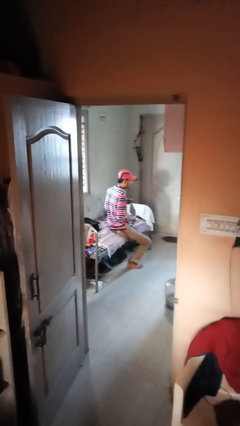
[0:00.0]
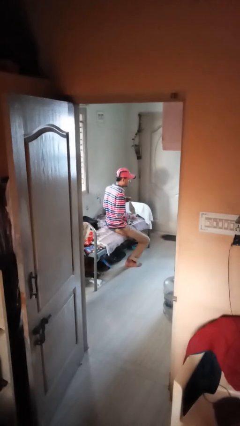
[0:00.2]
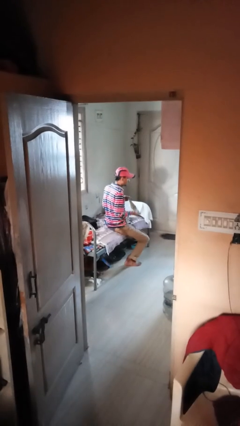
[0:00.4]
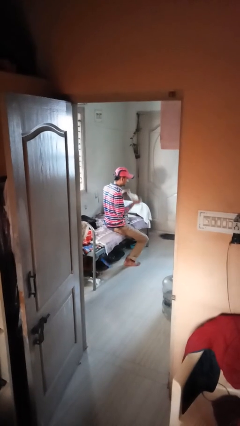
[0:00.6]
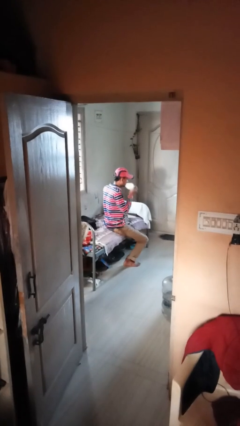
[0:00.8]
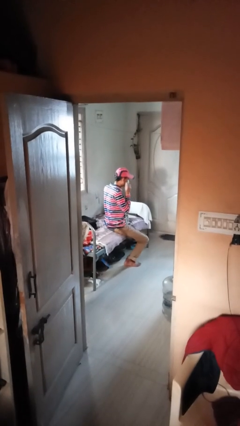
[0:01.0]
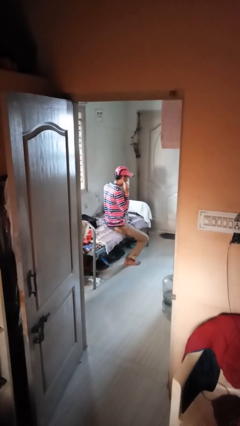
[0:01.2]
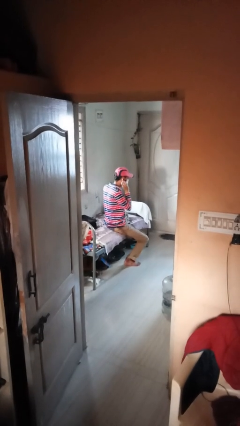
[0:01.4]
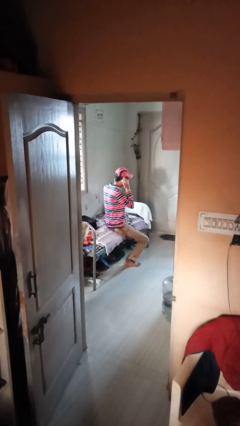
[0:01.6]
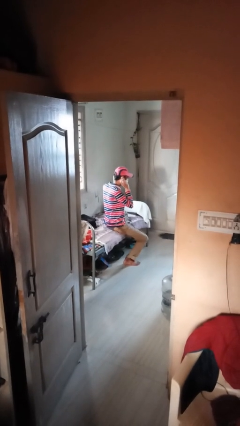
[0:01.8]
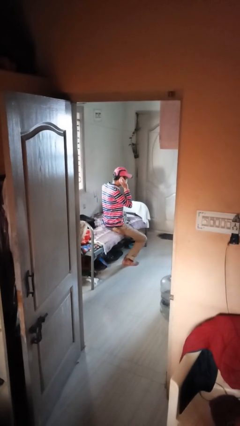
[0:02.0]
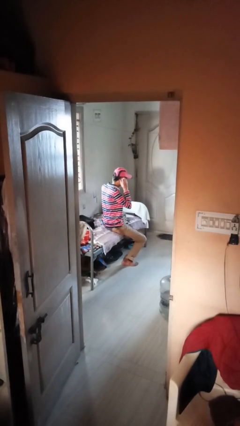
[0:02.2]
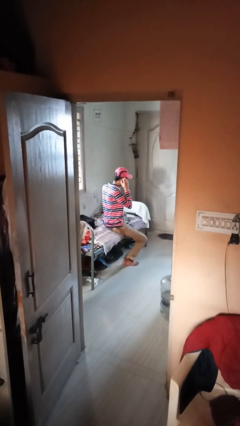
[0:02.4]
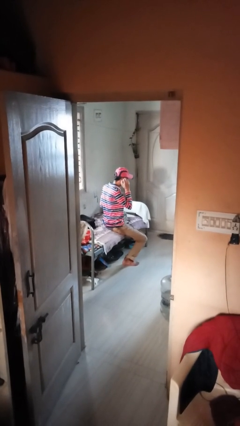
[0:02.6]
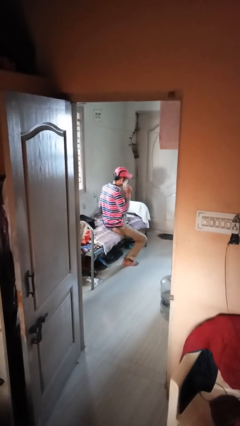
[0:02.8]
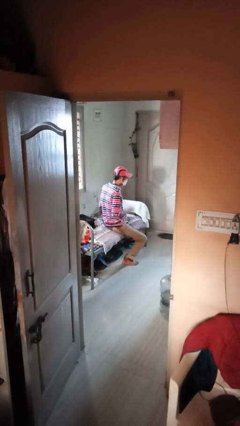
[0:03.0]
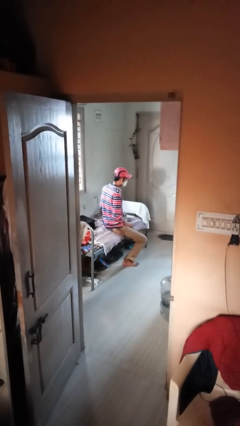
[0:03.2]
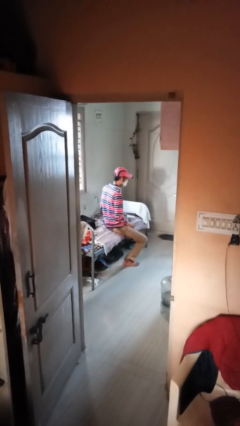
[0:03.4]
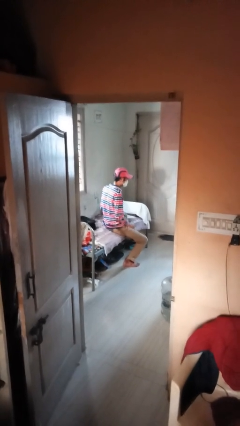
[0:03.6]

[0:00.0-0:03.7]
person puts on facemask

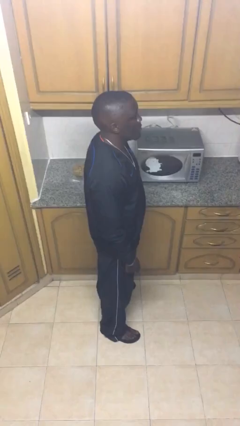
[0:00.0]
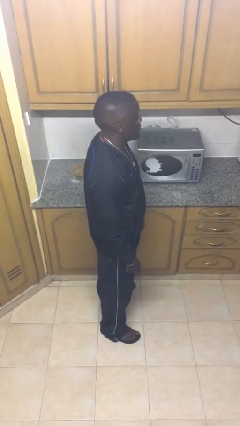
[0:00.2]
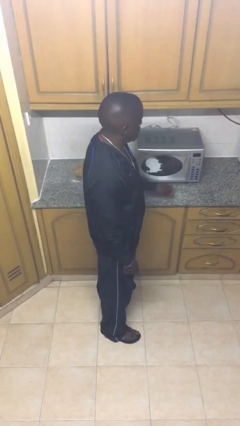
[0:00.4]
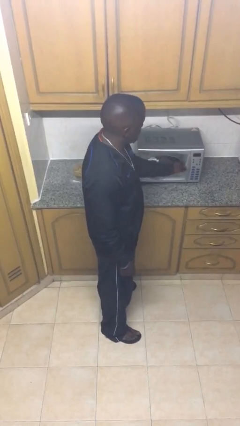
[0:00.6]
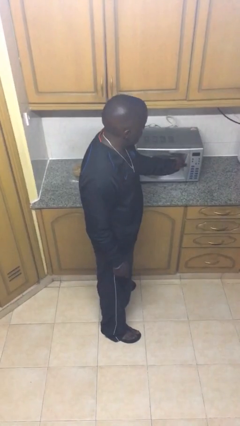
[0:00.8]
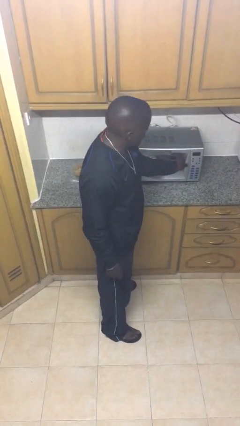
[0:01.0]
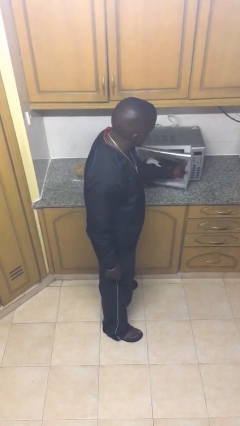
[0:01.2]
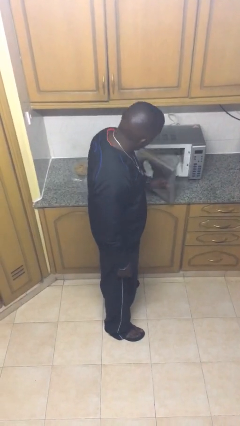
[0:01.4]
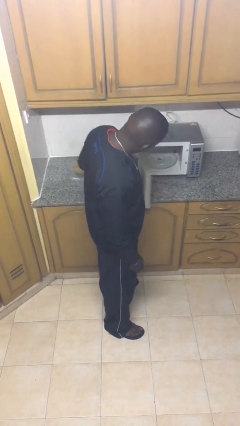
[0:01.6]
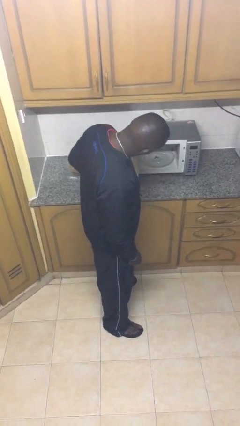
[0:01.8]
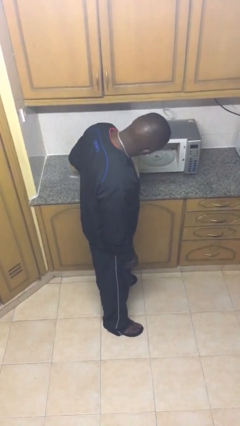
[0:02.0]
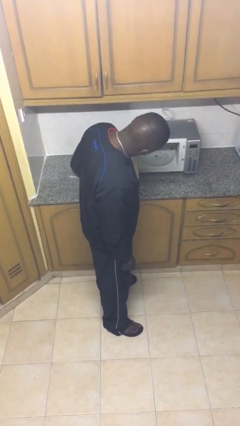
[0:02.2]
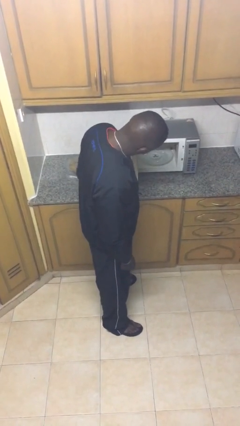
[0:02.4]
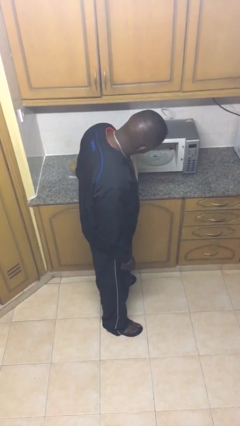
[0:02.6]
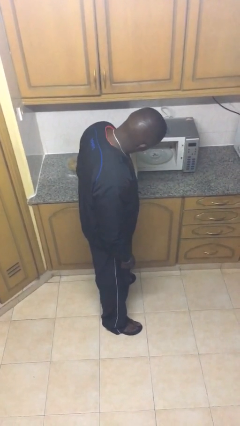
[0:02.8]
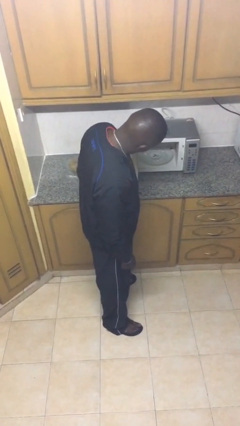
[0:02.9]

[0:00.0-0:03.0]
person opens microwave

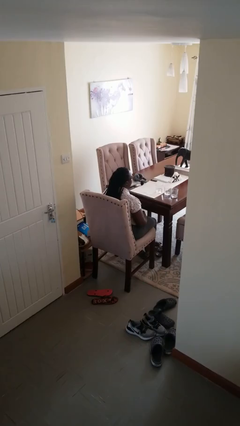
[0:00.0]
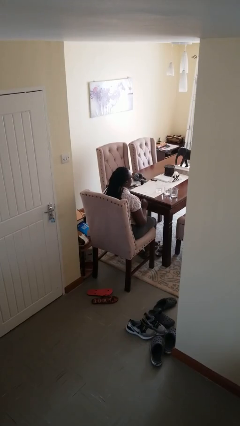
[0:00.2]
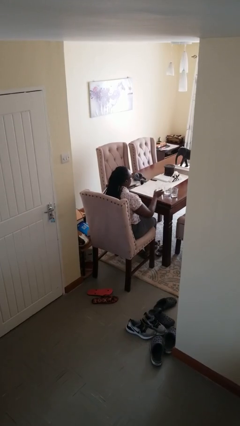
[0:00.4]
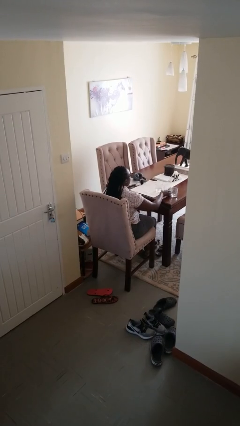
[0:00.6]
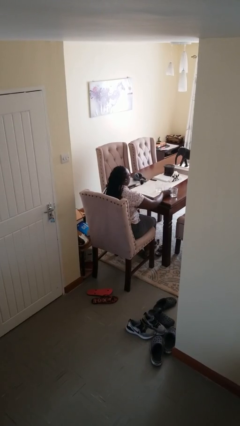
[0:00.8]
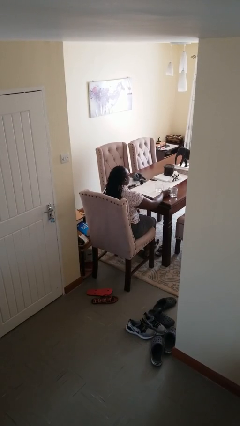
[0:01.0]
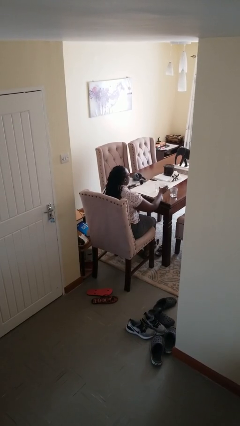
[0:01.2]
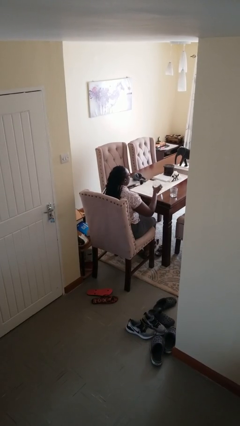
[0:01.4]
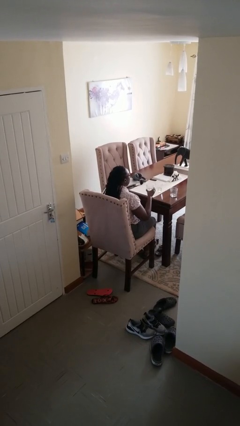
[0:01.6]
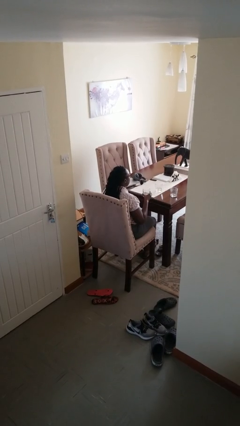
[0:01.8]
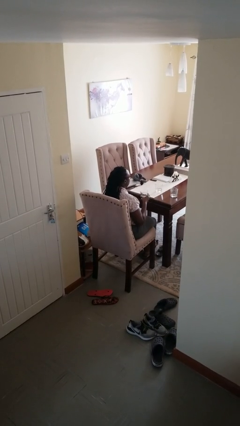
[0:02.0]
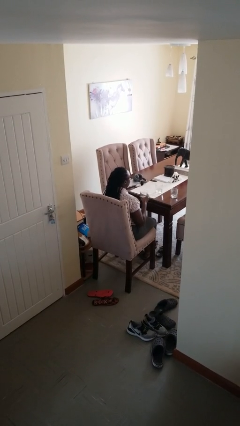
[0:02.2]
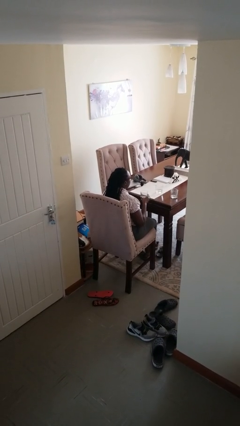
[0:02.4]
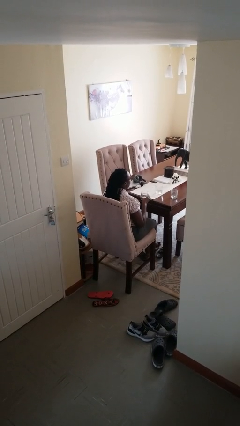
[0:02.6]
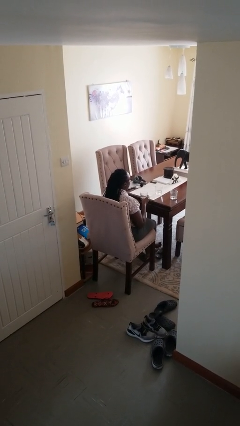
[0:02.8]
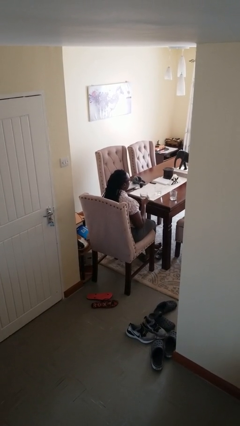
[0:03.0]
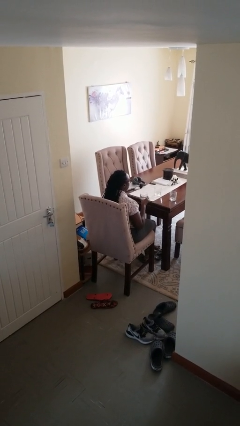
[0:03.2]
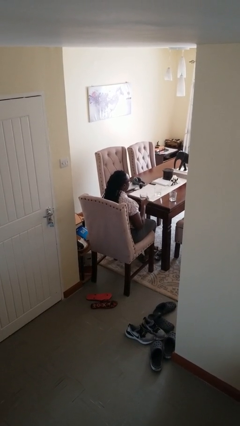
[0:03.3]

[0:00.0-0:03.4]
person picks up object from table

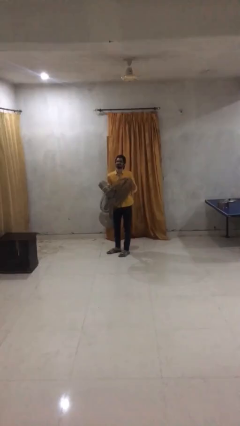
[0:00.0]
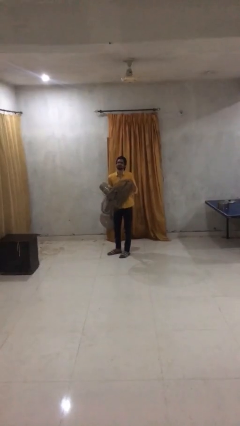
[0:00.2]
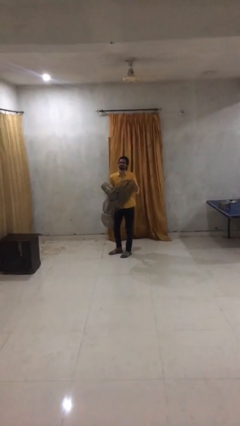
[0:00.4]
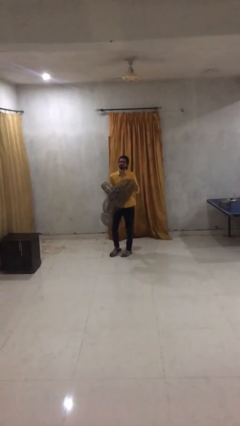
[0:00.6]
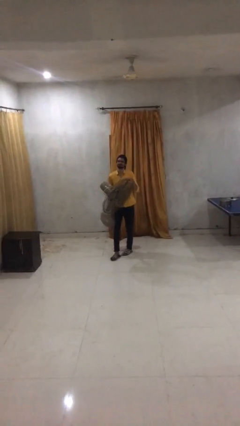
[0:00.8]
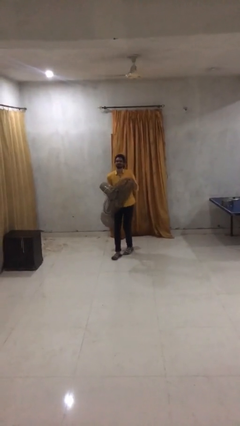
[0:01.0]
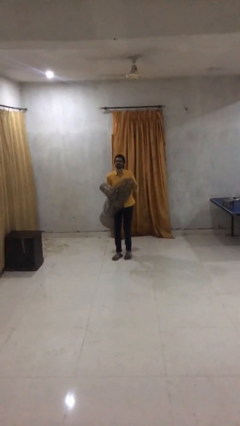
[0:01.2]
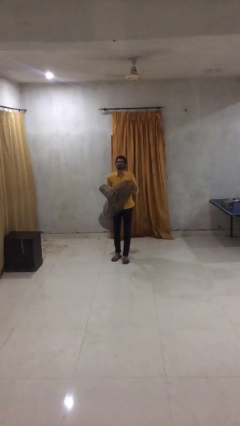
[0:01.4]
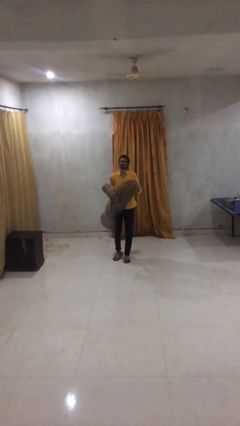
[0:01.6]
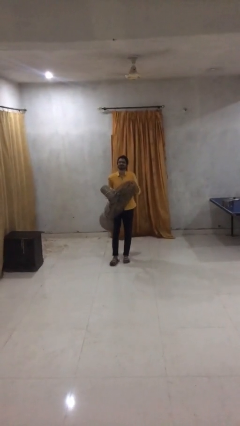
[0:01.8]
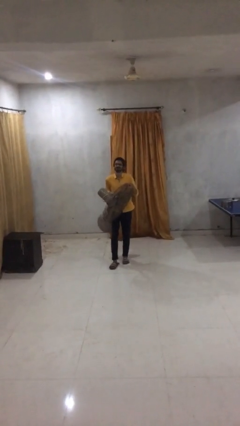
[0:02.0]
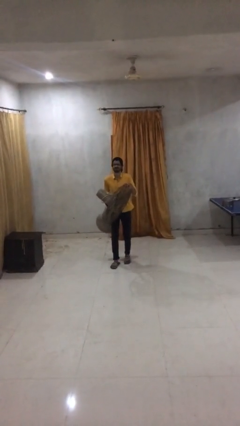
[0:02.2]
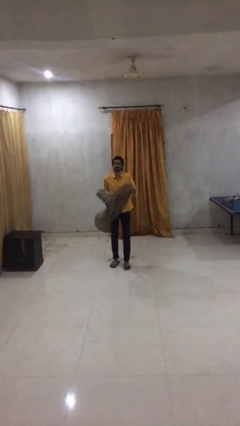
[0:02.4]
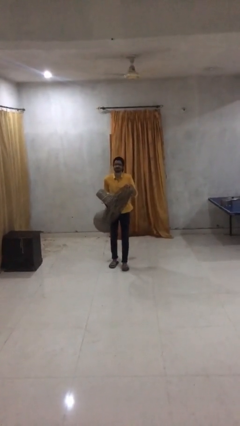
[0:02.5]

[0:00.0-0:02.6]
person carries heavy object

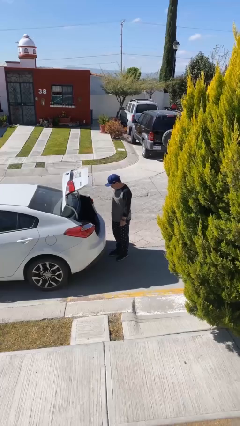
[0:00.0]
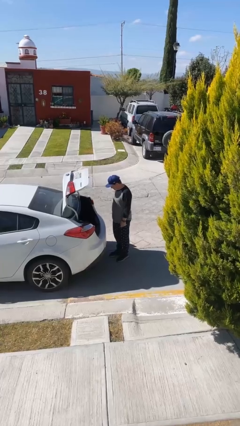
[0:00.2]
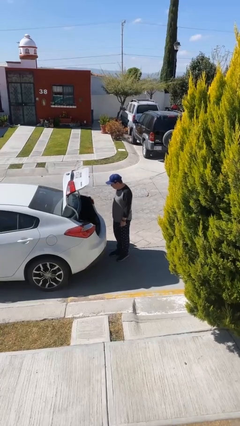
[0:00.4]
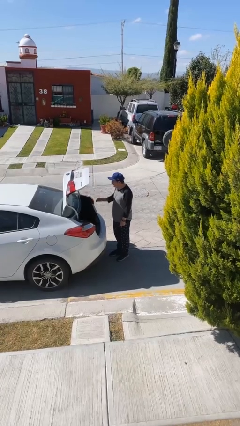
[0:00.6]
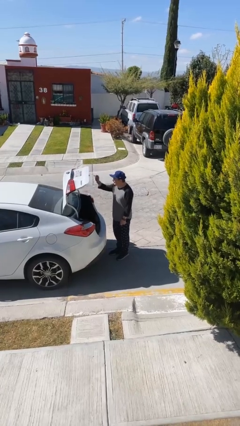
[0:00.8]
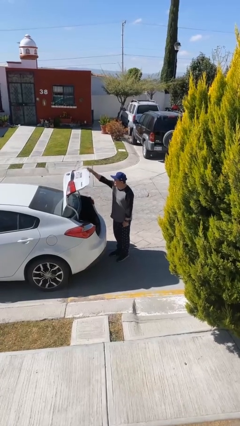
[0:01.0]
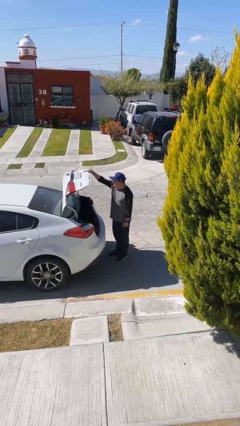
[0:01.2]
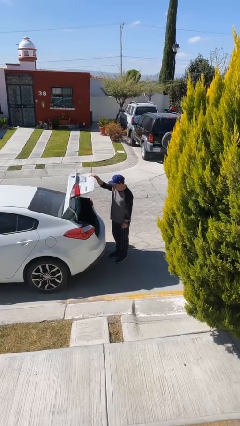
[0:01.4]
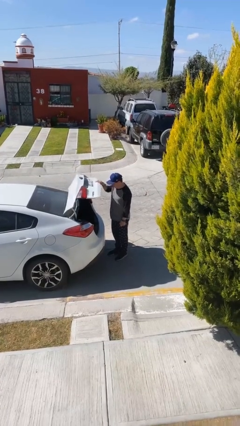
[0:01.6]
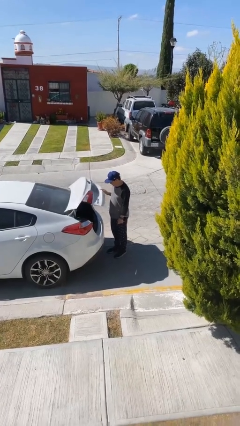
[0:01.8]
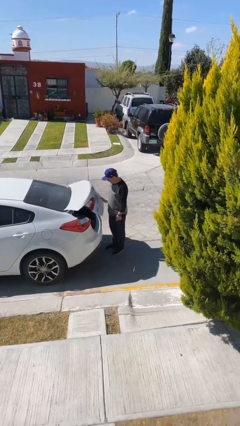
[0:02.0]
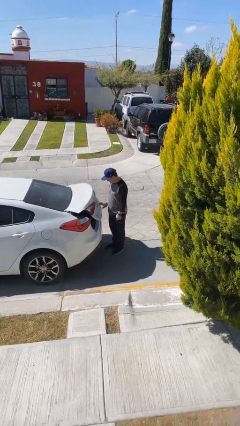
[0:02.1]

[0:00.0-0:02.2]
person closes car trunk

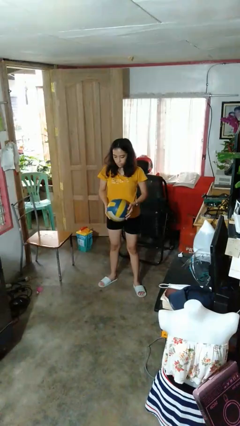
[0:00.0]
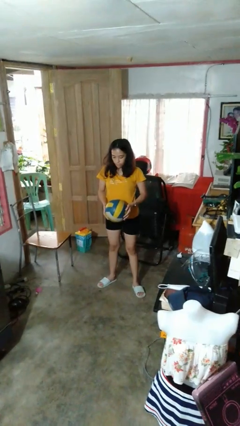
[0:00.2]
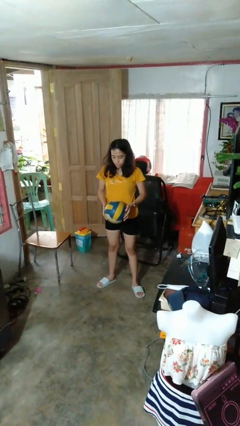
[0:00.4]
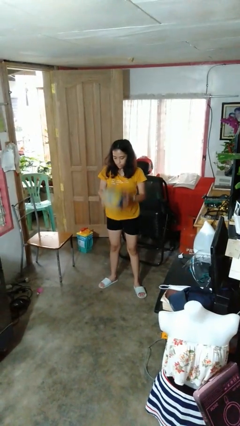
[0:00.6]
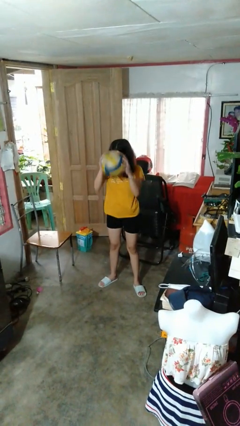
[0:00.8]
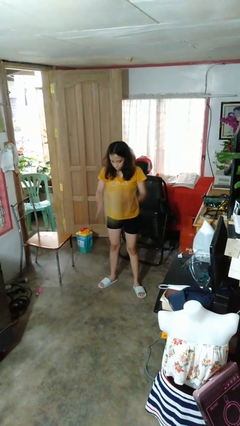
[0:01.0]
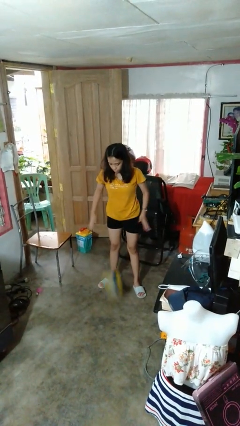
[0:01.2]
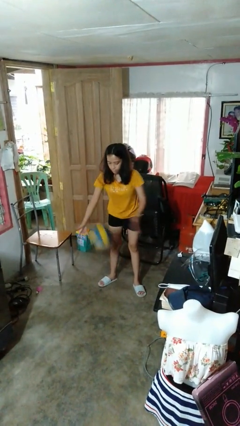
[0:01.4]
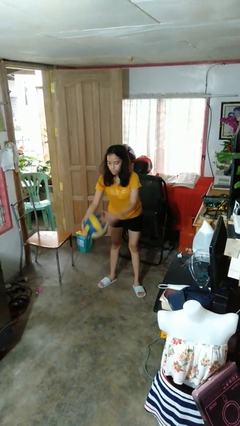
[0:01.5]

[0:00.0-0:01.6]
person bounces ball on floor

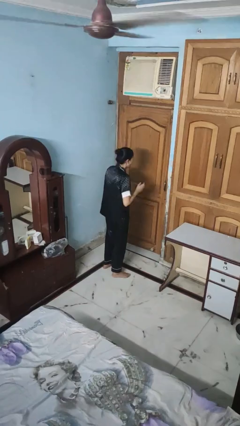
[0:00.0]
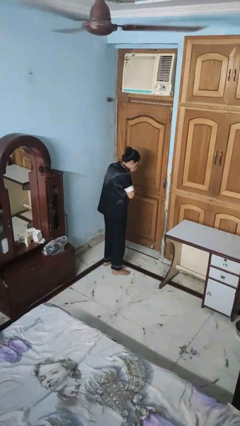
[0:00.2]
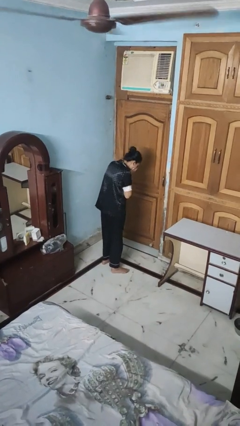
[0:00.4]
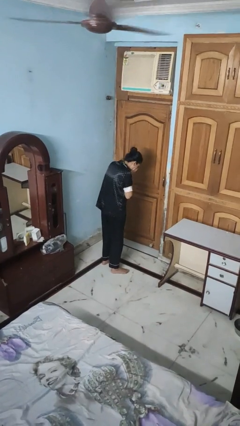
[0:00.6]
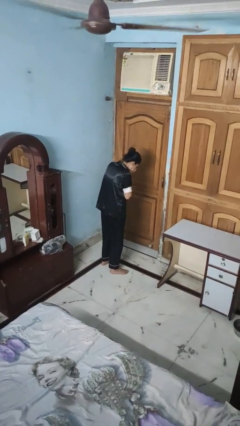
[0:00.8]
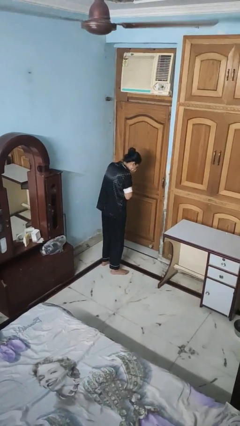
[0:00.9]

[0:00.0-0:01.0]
person sneezes into hand
